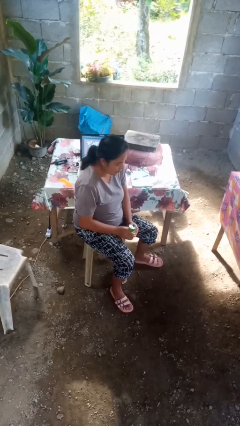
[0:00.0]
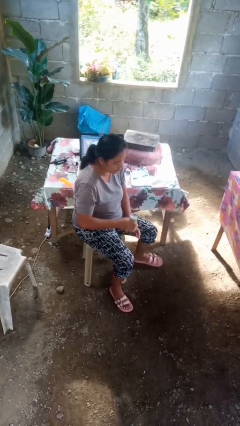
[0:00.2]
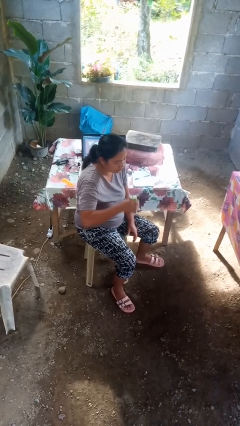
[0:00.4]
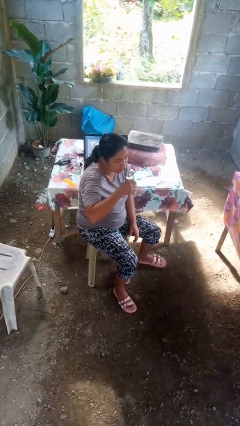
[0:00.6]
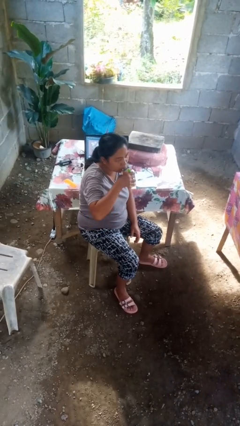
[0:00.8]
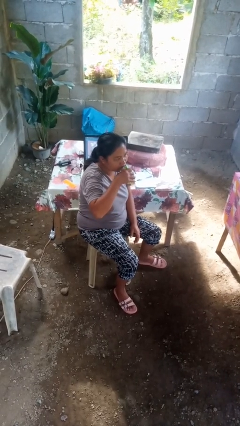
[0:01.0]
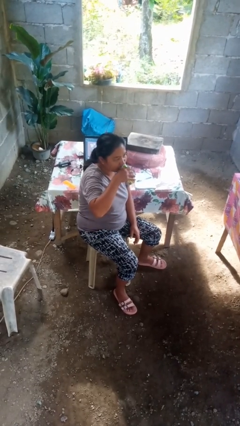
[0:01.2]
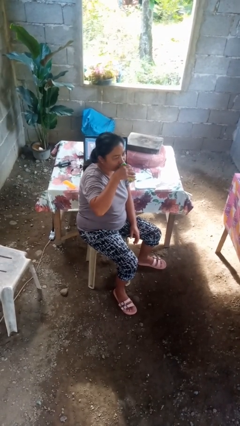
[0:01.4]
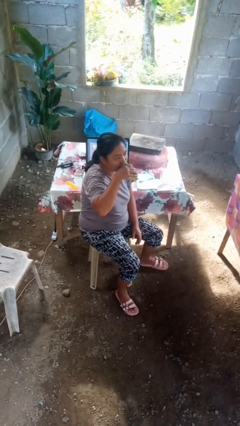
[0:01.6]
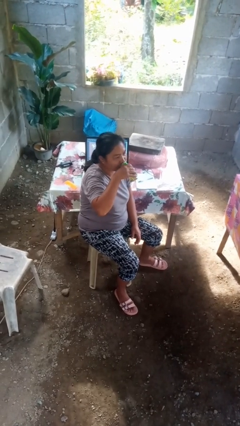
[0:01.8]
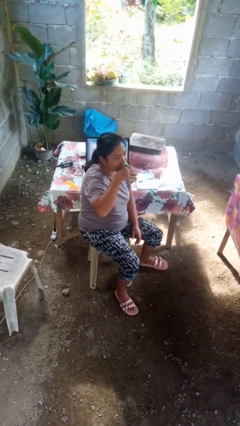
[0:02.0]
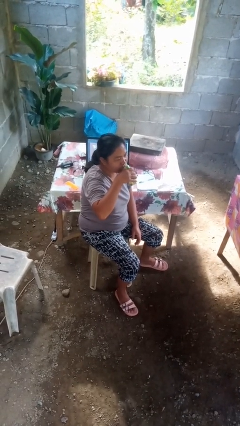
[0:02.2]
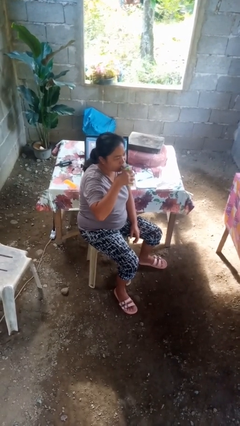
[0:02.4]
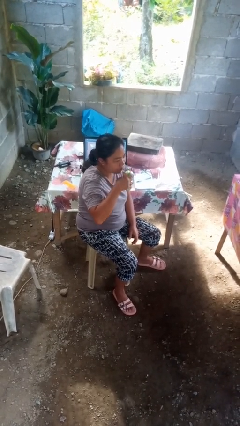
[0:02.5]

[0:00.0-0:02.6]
person drinks from beverage can

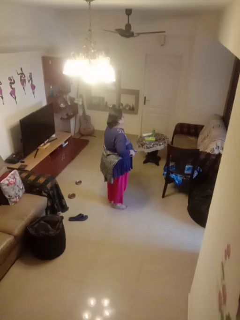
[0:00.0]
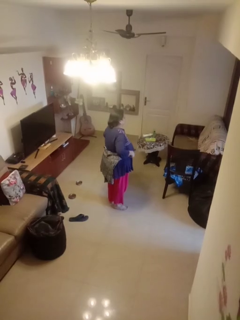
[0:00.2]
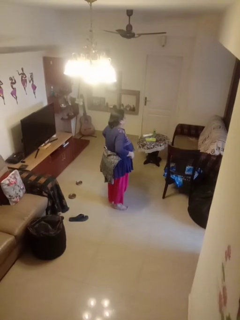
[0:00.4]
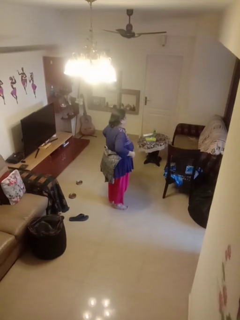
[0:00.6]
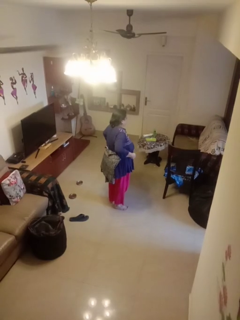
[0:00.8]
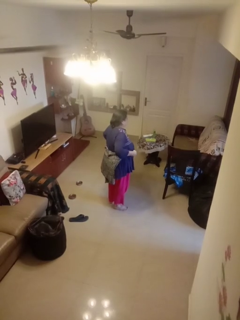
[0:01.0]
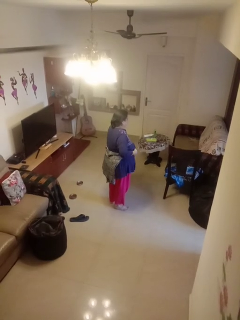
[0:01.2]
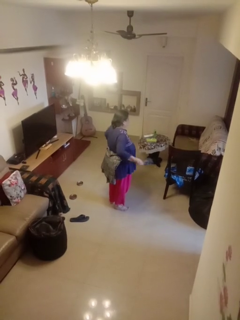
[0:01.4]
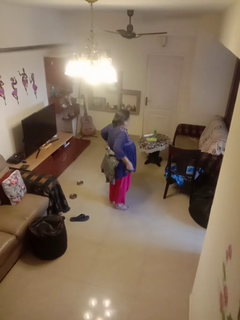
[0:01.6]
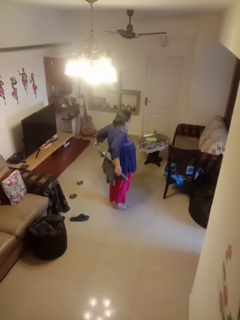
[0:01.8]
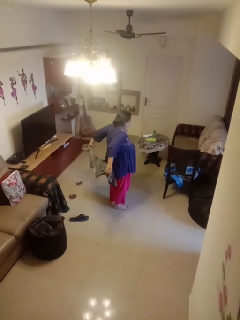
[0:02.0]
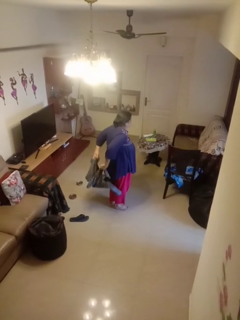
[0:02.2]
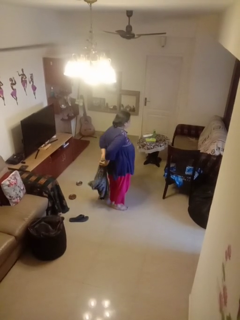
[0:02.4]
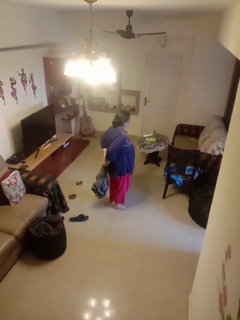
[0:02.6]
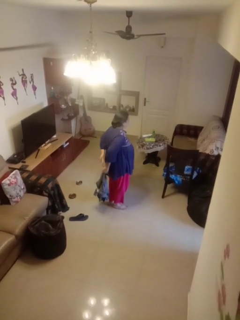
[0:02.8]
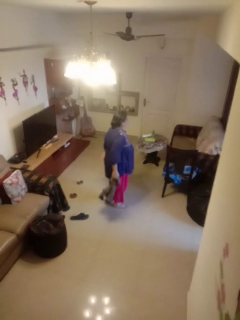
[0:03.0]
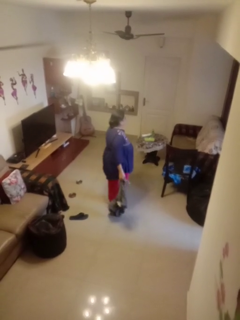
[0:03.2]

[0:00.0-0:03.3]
person unties jacket around waist

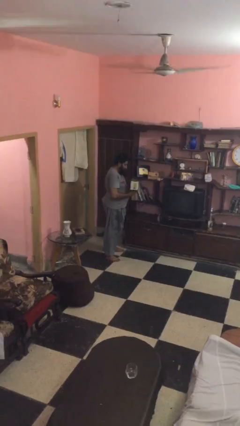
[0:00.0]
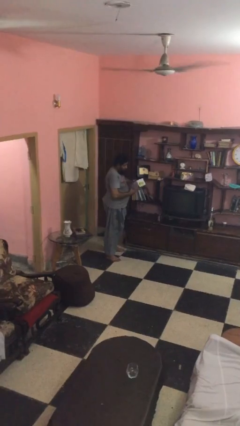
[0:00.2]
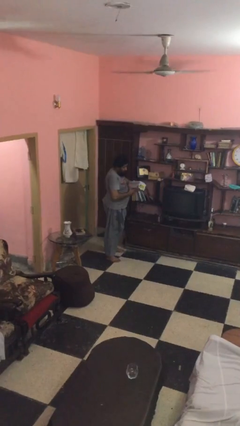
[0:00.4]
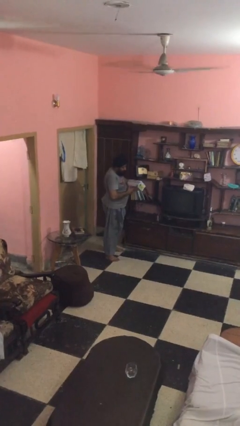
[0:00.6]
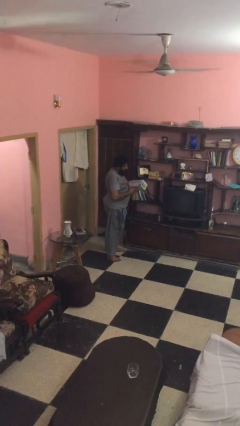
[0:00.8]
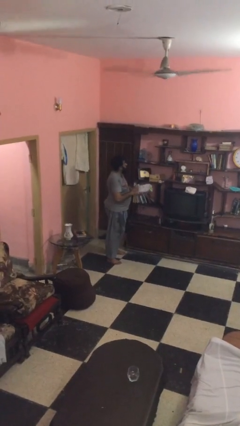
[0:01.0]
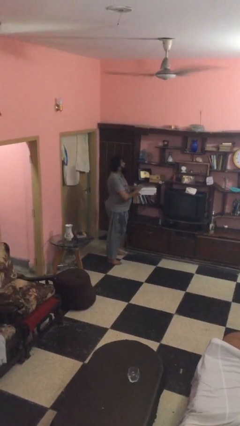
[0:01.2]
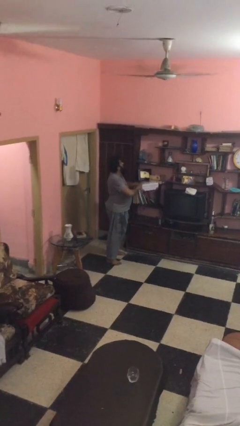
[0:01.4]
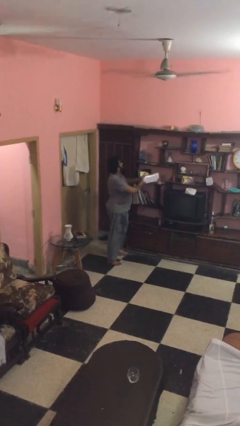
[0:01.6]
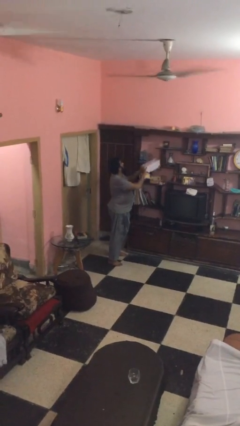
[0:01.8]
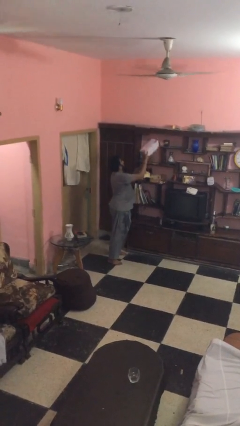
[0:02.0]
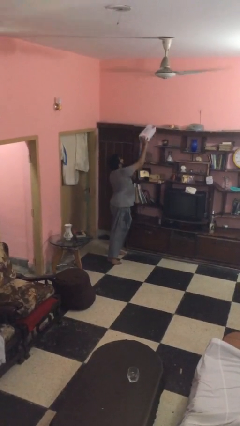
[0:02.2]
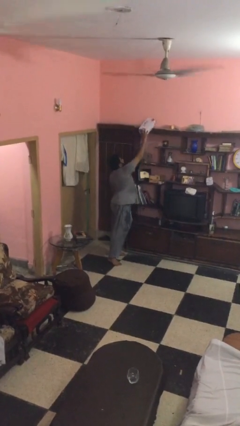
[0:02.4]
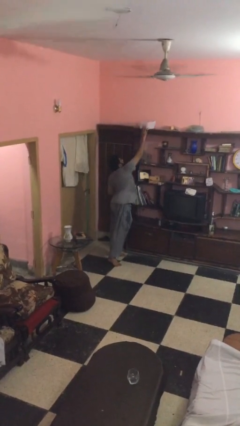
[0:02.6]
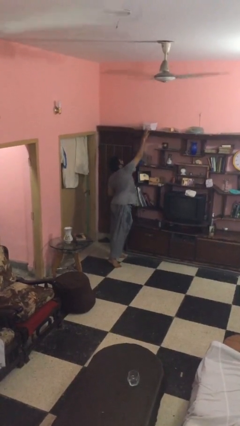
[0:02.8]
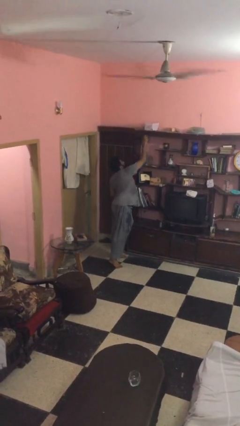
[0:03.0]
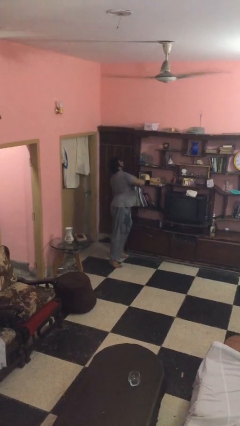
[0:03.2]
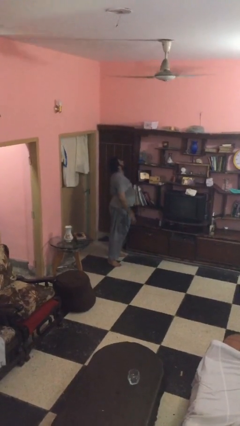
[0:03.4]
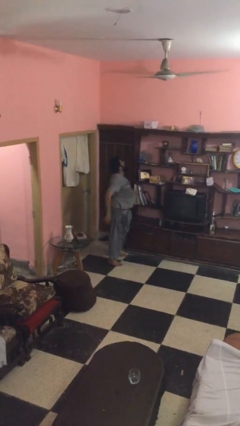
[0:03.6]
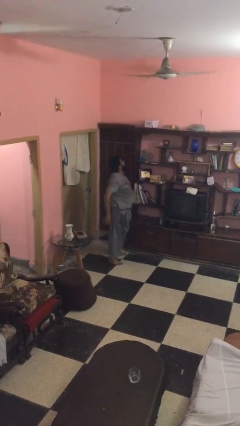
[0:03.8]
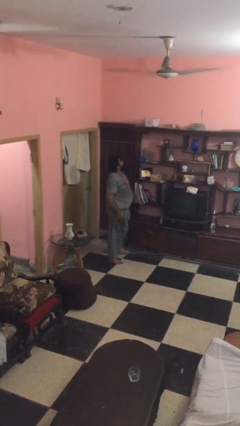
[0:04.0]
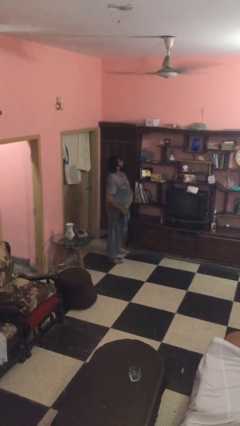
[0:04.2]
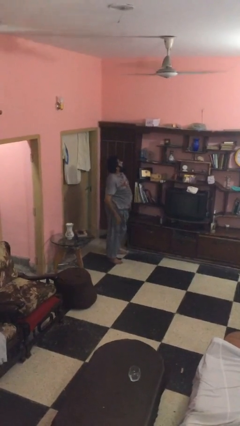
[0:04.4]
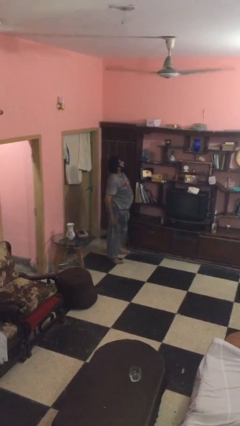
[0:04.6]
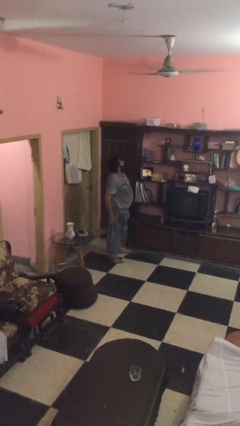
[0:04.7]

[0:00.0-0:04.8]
person puts down object on shelf

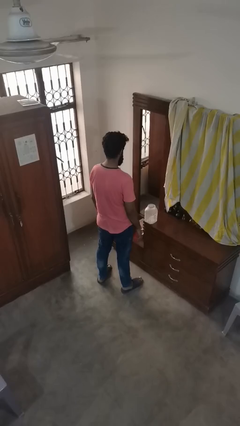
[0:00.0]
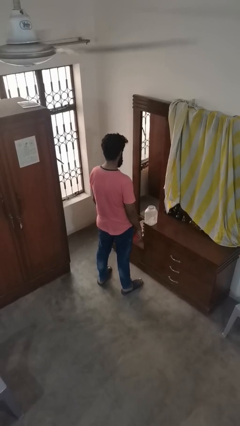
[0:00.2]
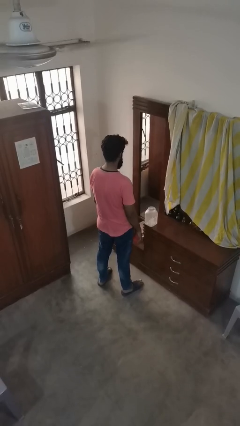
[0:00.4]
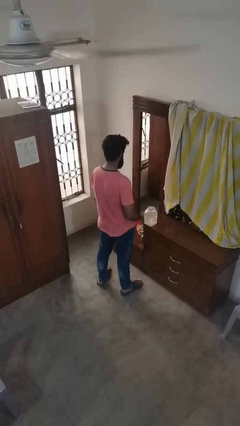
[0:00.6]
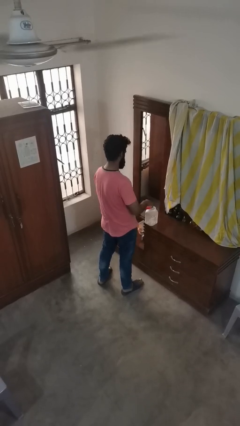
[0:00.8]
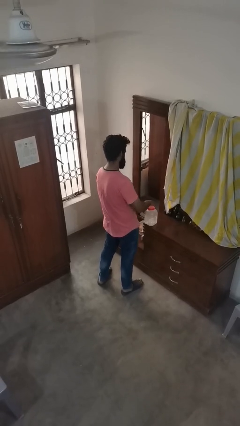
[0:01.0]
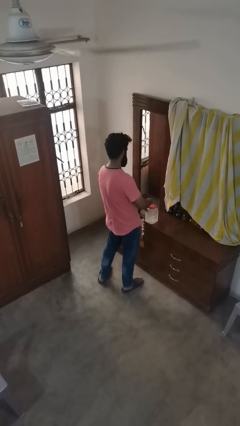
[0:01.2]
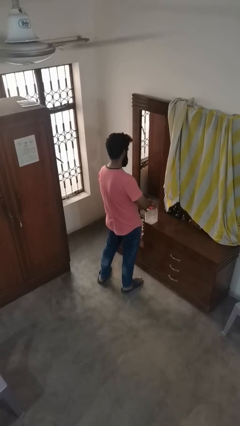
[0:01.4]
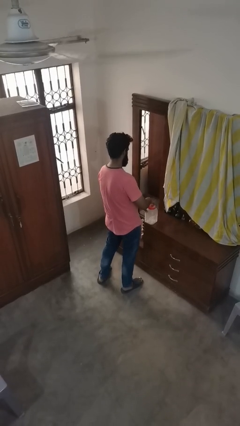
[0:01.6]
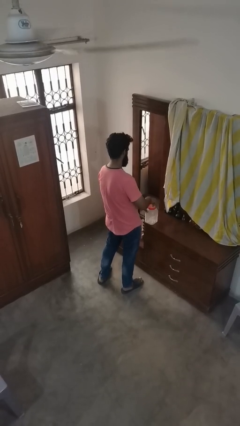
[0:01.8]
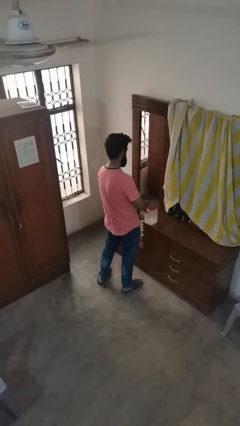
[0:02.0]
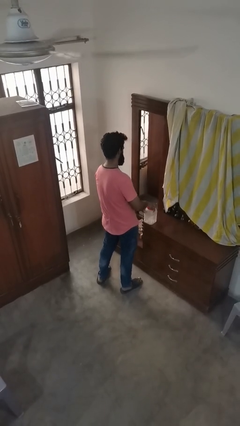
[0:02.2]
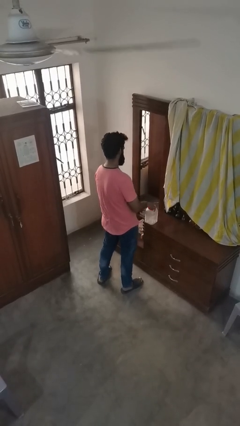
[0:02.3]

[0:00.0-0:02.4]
person closes jar

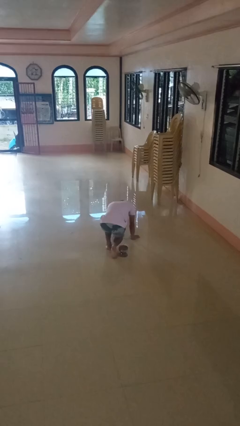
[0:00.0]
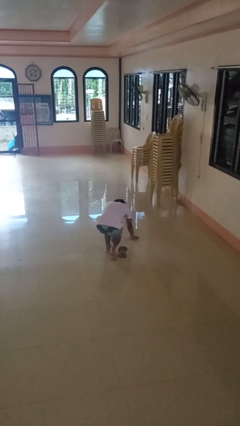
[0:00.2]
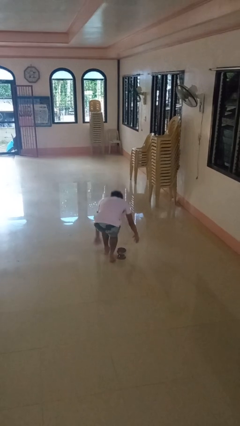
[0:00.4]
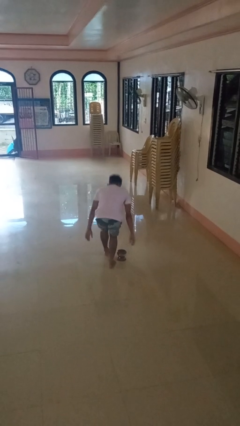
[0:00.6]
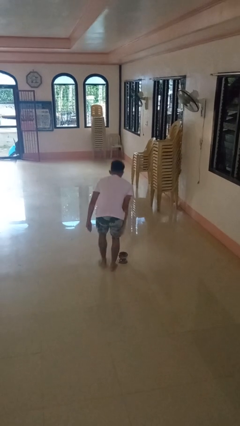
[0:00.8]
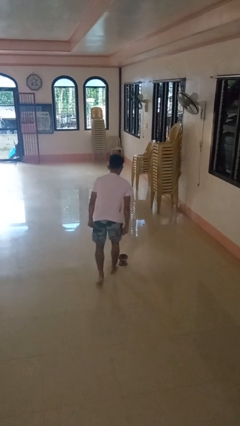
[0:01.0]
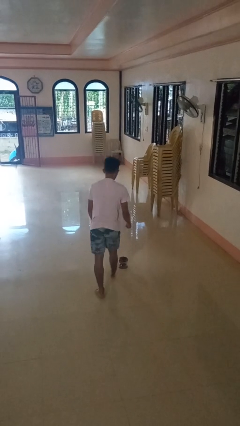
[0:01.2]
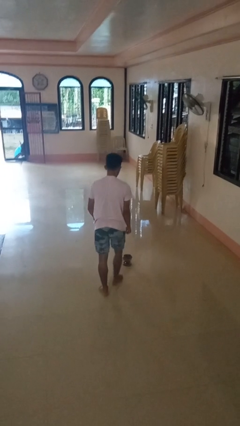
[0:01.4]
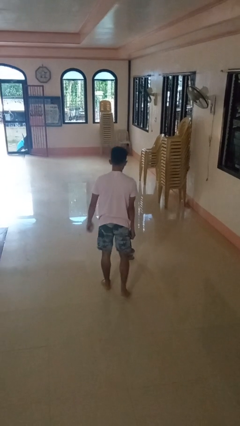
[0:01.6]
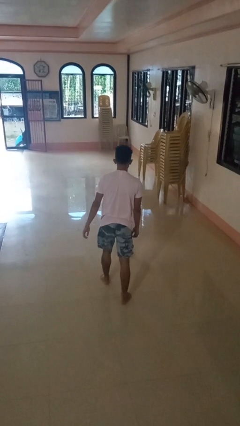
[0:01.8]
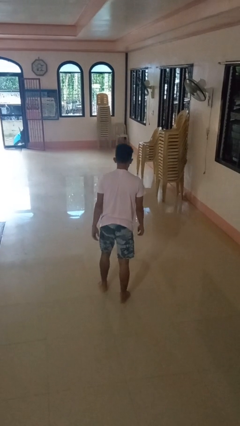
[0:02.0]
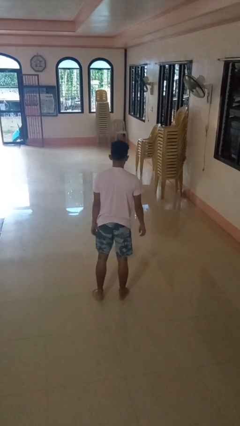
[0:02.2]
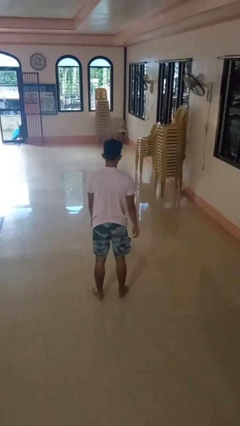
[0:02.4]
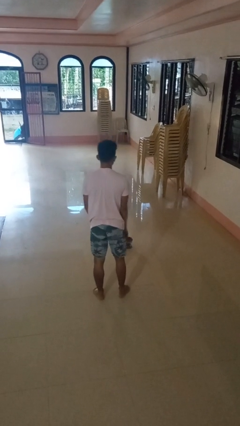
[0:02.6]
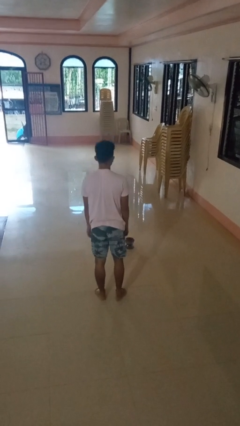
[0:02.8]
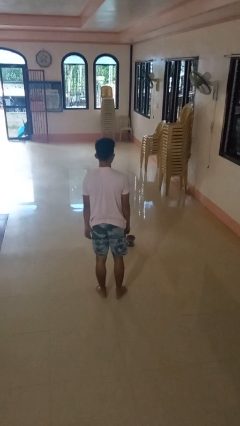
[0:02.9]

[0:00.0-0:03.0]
person stands up from floor

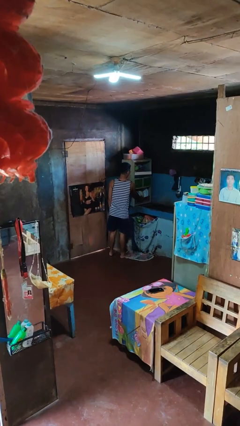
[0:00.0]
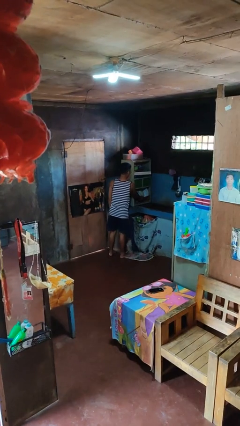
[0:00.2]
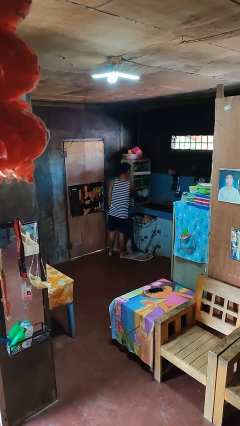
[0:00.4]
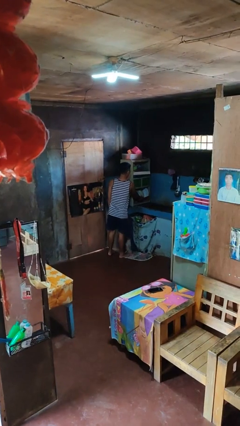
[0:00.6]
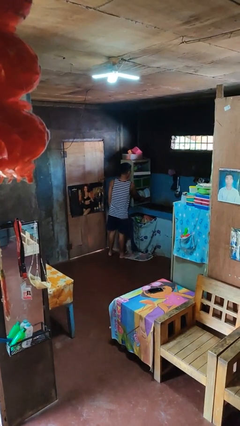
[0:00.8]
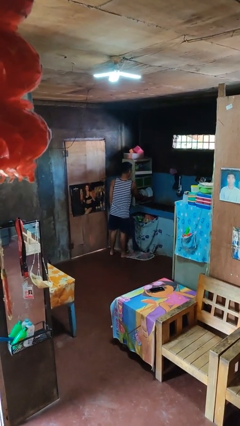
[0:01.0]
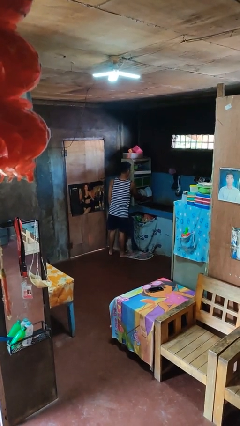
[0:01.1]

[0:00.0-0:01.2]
person opens dishwasher

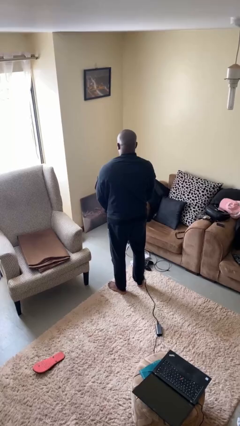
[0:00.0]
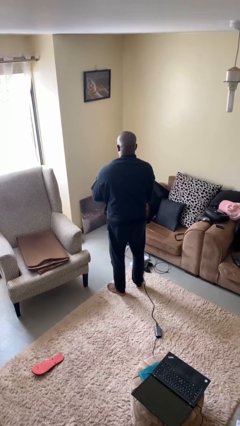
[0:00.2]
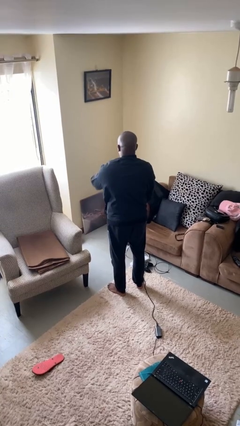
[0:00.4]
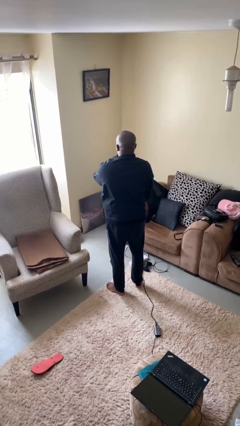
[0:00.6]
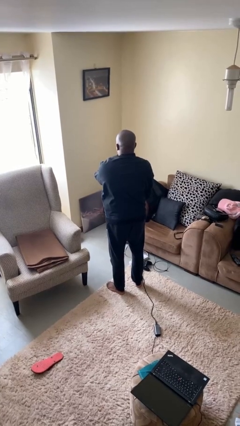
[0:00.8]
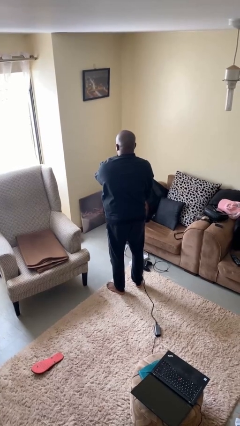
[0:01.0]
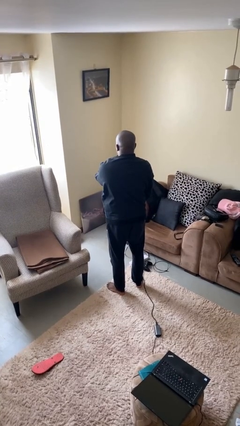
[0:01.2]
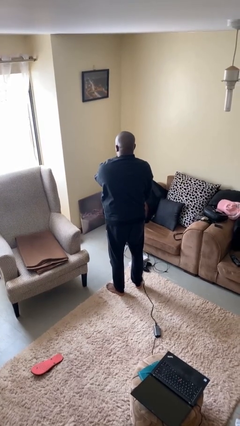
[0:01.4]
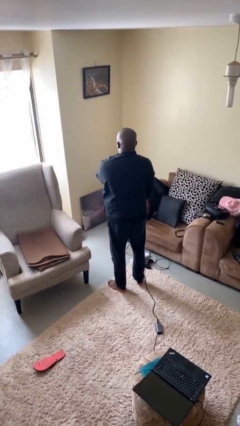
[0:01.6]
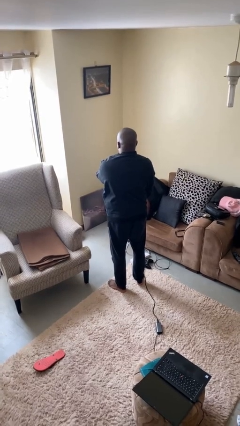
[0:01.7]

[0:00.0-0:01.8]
person zips up jacket
